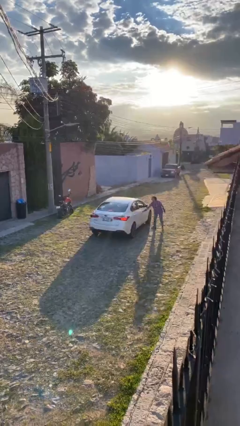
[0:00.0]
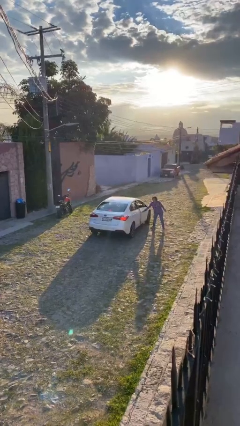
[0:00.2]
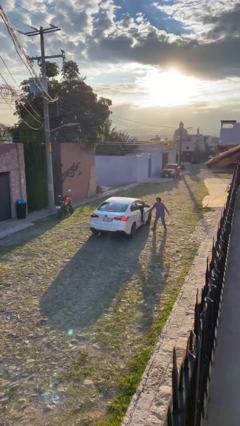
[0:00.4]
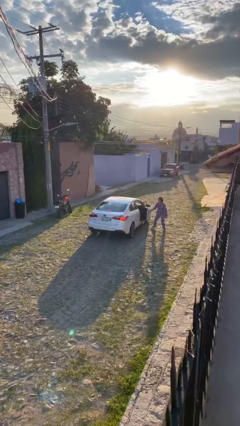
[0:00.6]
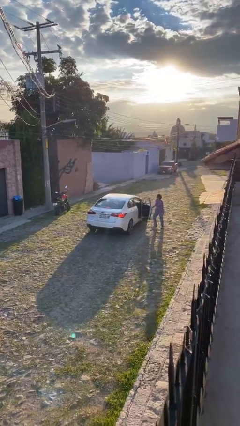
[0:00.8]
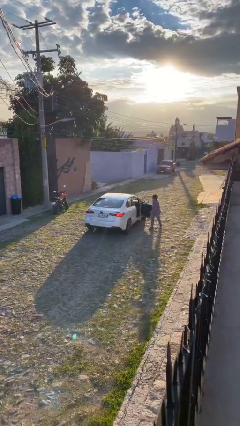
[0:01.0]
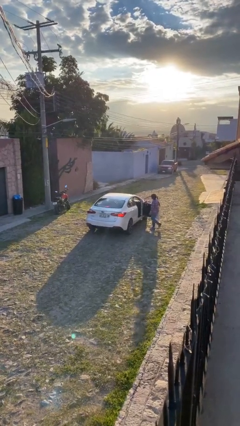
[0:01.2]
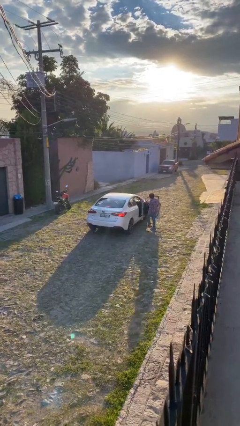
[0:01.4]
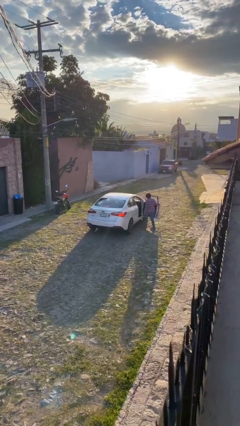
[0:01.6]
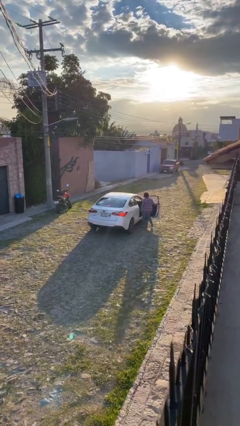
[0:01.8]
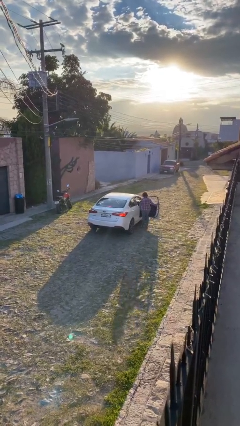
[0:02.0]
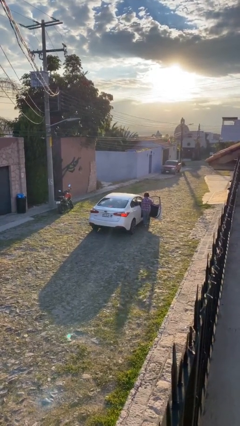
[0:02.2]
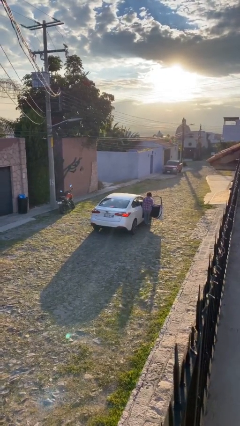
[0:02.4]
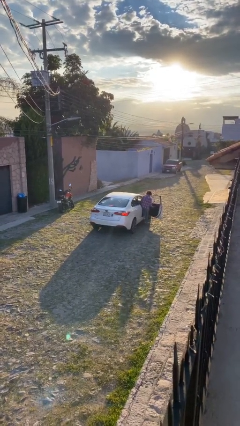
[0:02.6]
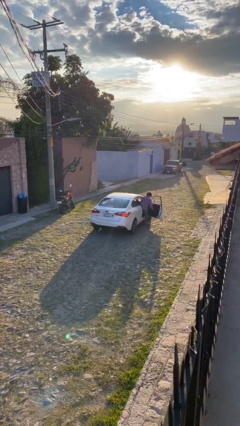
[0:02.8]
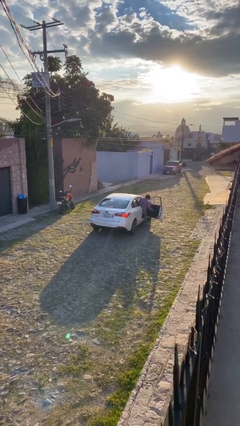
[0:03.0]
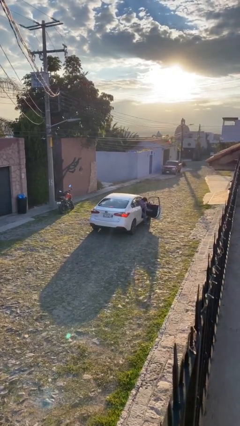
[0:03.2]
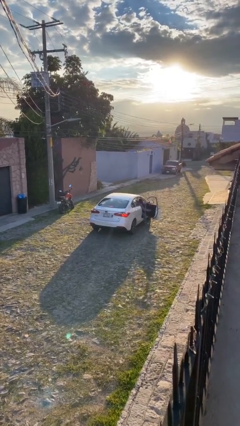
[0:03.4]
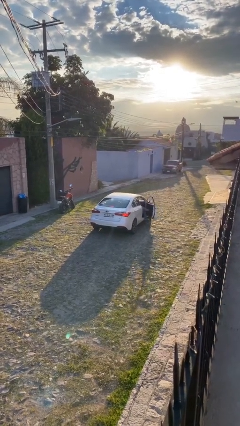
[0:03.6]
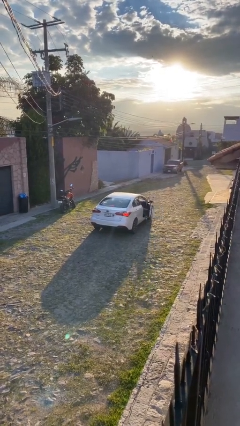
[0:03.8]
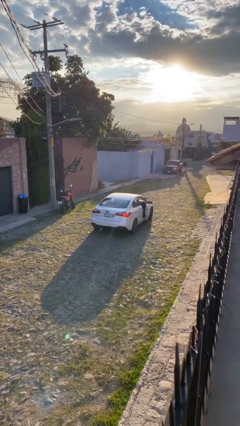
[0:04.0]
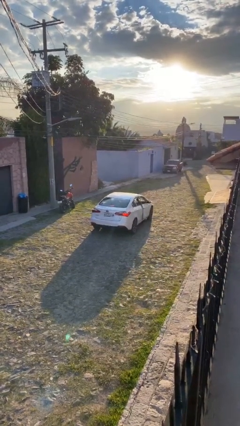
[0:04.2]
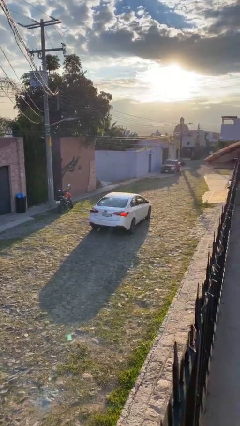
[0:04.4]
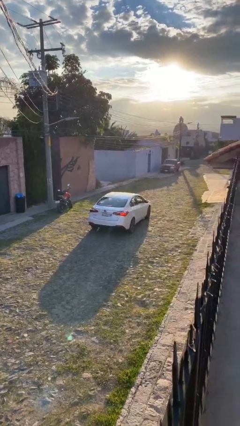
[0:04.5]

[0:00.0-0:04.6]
car picks up person

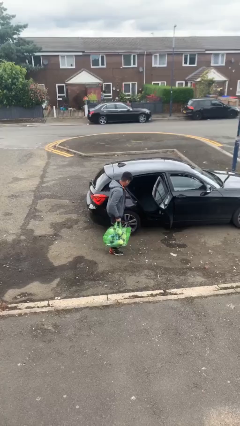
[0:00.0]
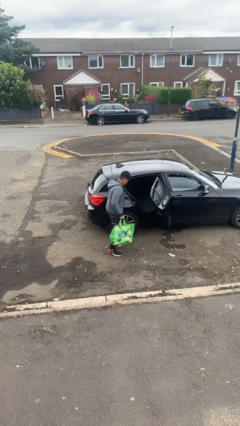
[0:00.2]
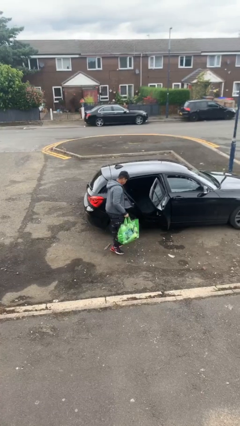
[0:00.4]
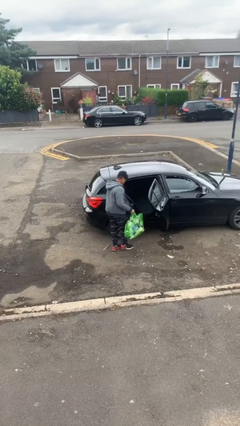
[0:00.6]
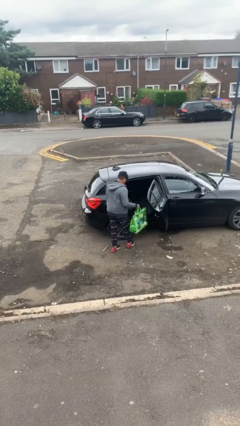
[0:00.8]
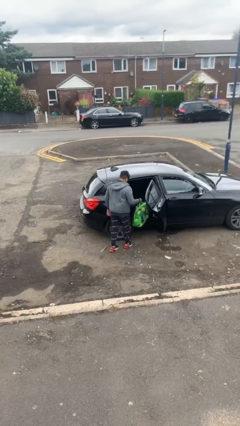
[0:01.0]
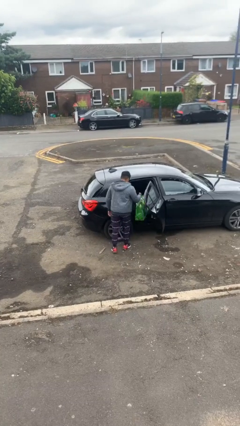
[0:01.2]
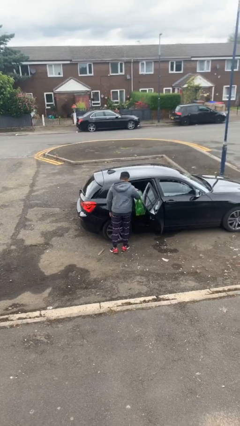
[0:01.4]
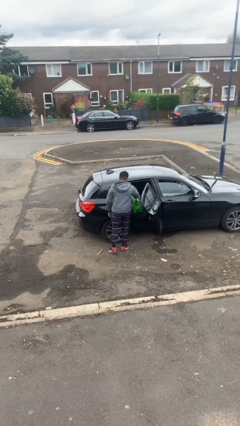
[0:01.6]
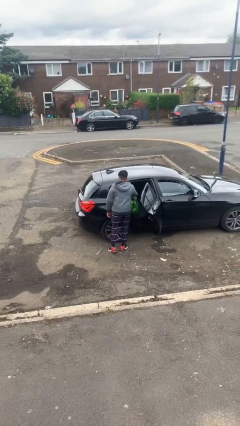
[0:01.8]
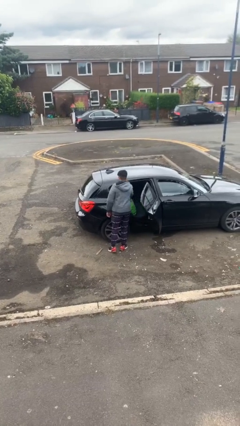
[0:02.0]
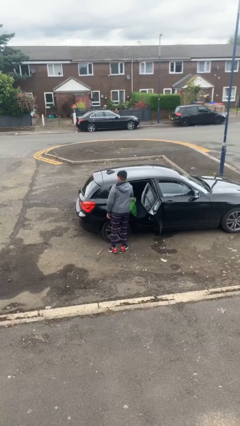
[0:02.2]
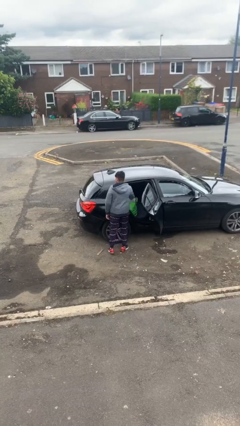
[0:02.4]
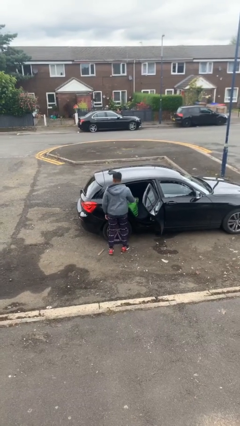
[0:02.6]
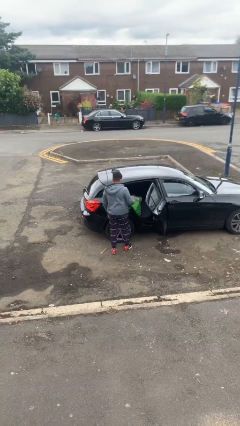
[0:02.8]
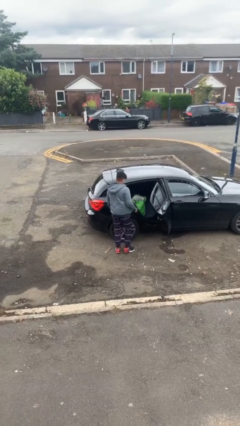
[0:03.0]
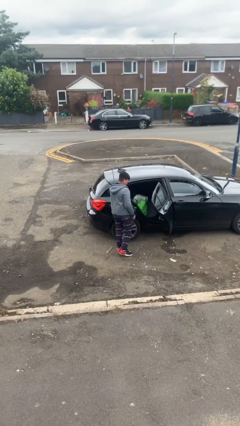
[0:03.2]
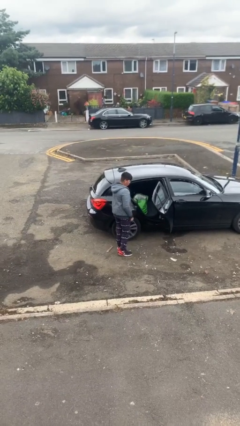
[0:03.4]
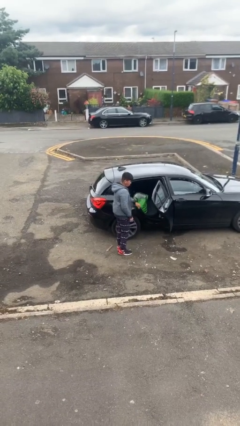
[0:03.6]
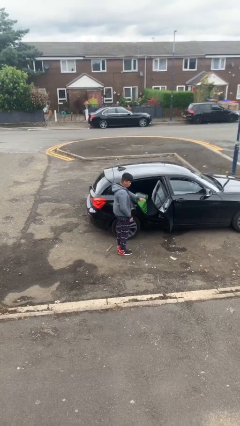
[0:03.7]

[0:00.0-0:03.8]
person loads car

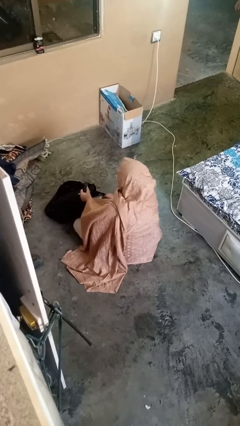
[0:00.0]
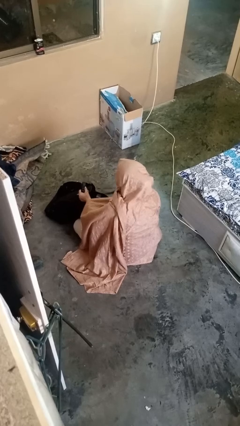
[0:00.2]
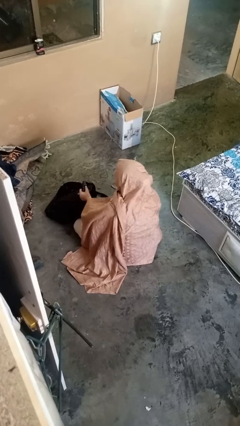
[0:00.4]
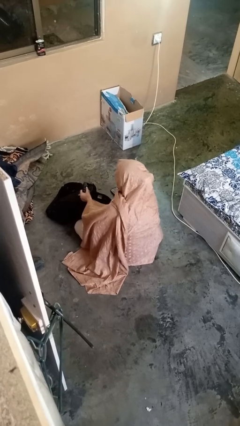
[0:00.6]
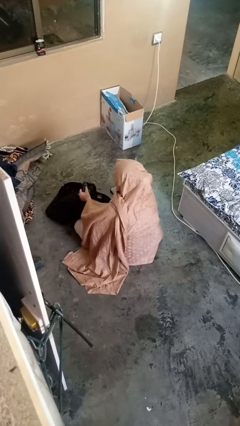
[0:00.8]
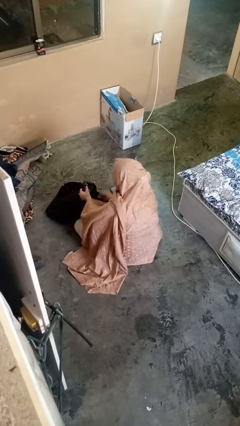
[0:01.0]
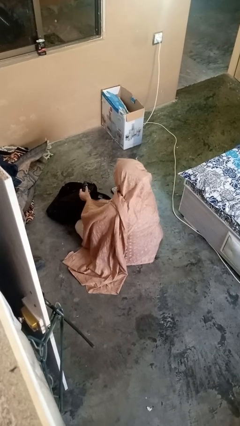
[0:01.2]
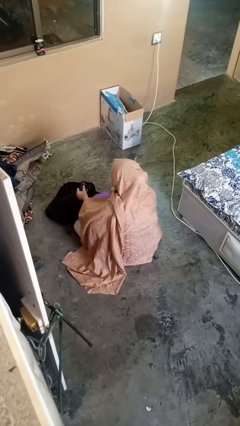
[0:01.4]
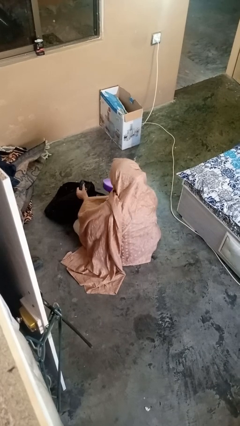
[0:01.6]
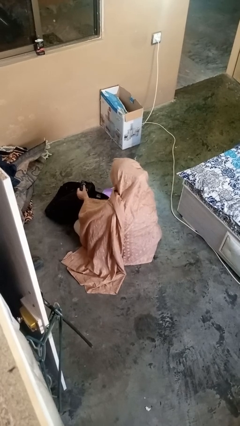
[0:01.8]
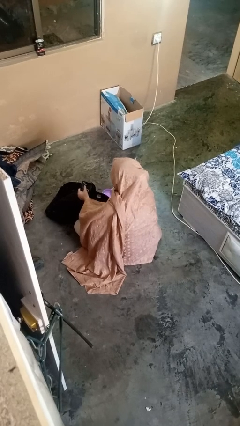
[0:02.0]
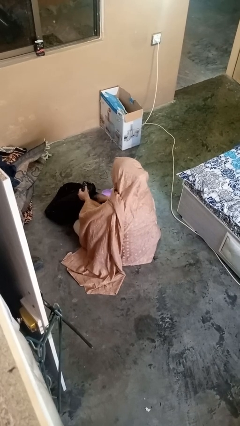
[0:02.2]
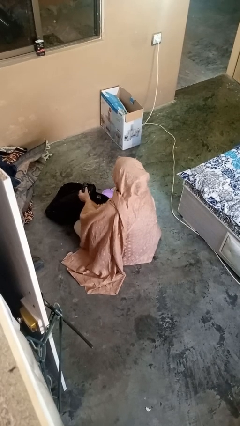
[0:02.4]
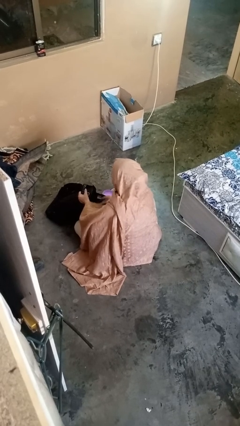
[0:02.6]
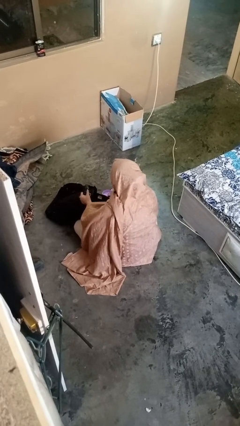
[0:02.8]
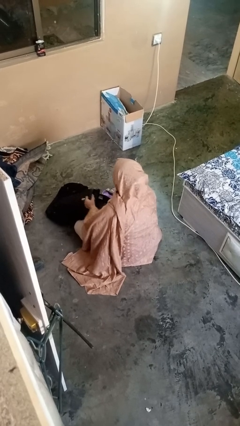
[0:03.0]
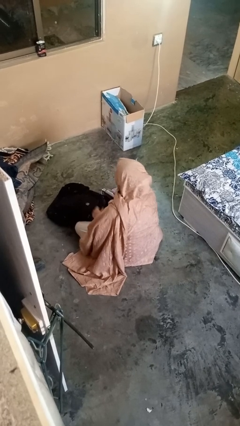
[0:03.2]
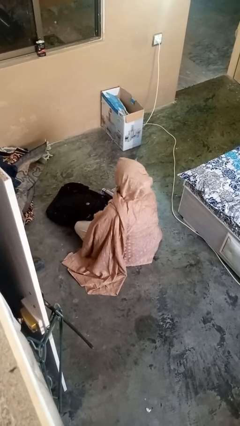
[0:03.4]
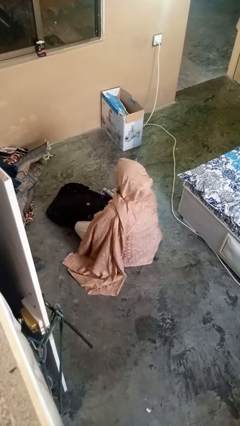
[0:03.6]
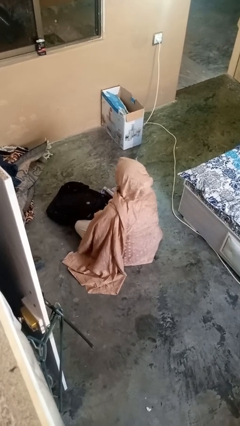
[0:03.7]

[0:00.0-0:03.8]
person takes object from backpack

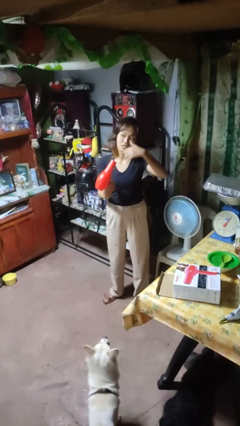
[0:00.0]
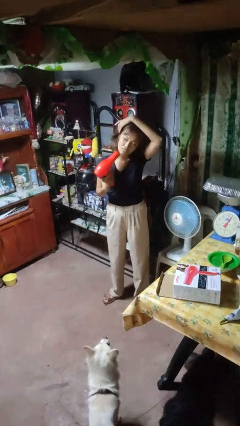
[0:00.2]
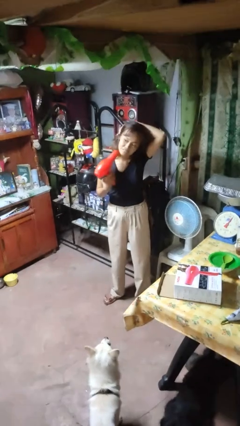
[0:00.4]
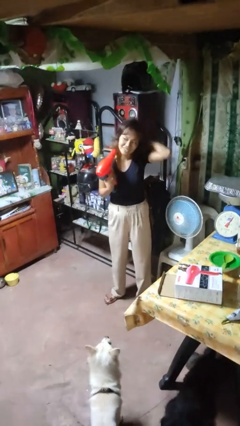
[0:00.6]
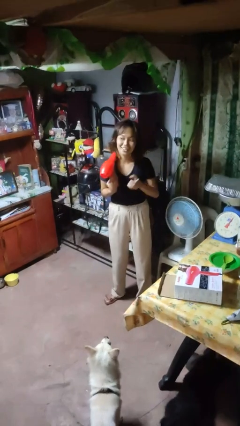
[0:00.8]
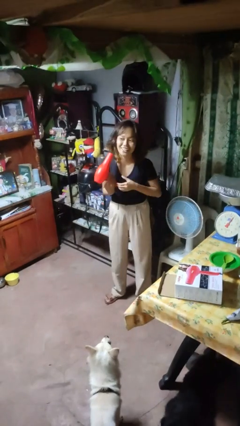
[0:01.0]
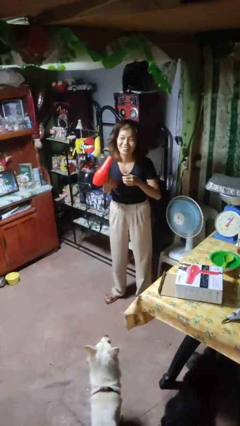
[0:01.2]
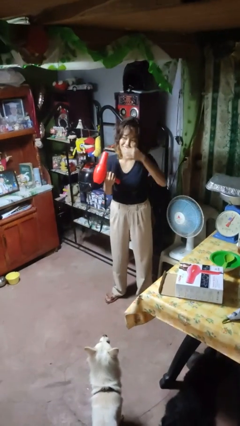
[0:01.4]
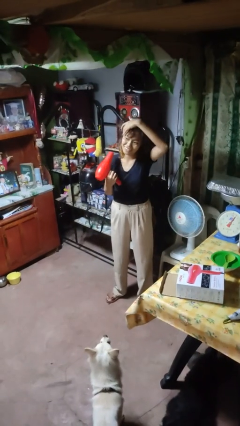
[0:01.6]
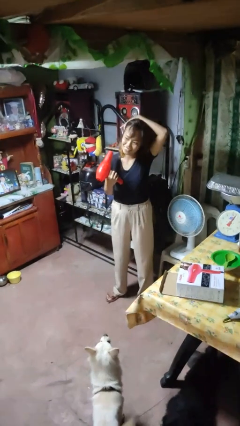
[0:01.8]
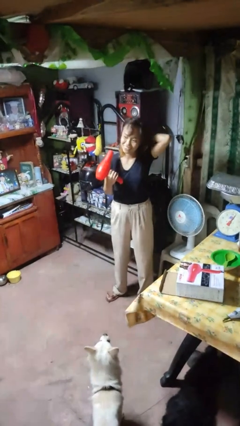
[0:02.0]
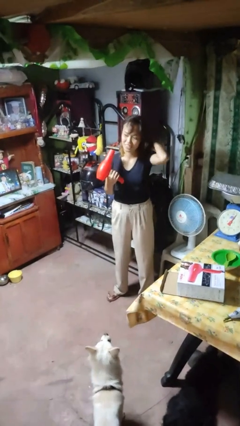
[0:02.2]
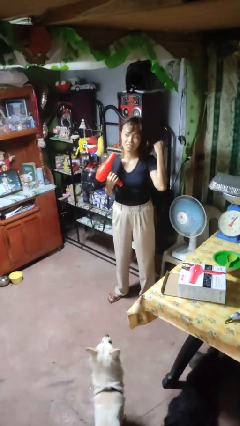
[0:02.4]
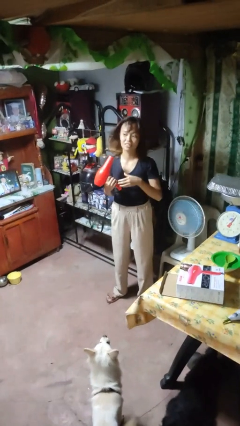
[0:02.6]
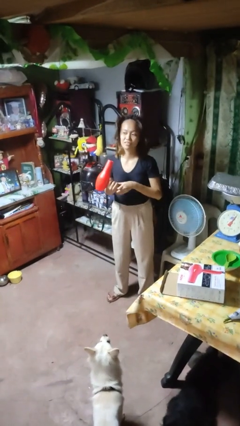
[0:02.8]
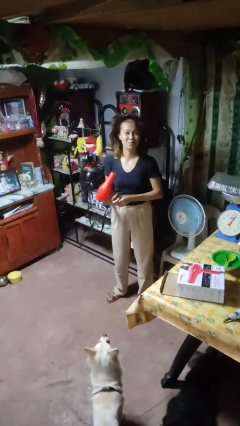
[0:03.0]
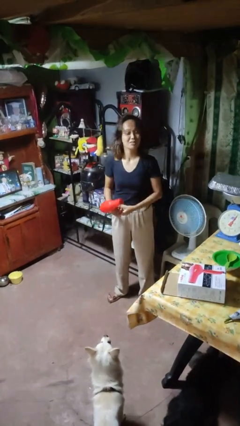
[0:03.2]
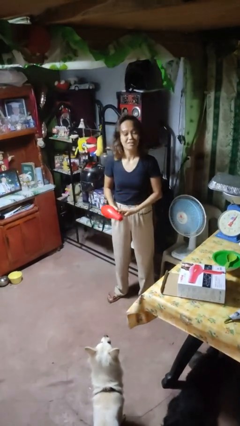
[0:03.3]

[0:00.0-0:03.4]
person dries hair with hairdryer

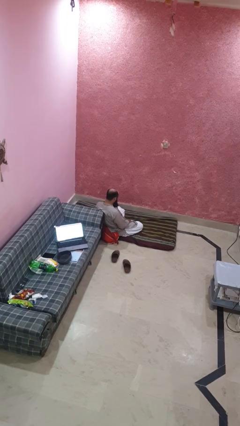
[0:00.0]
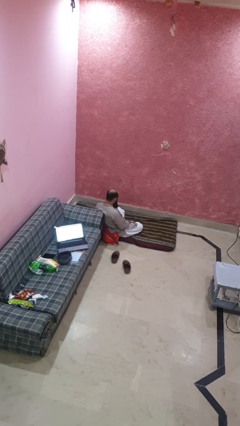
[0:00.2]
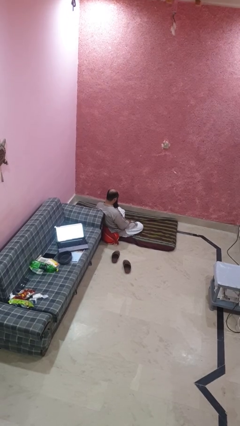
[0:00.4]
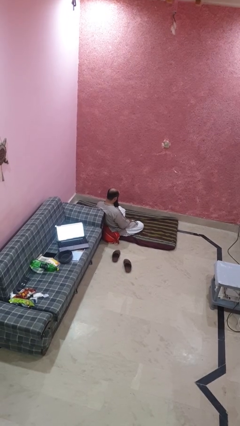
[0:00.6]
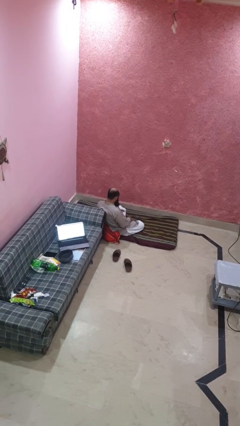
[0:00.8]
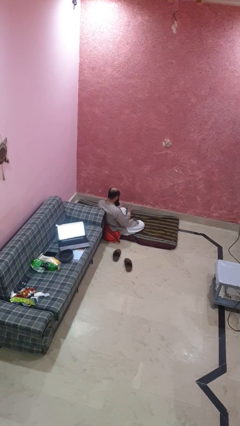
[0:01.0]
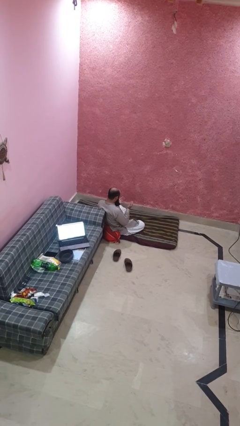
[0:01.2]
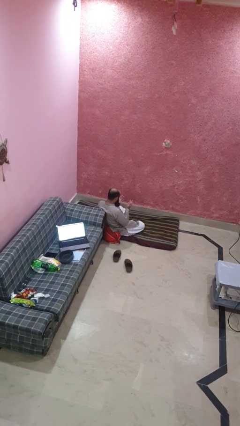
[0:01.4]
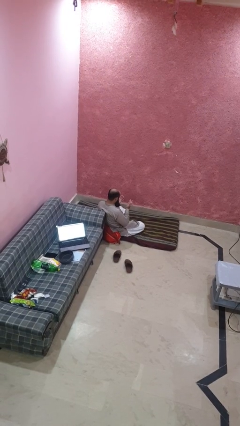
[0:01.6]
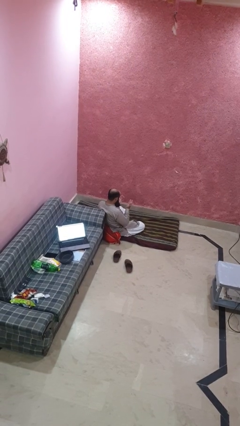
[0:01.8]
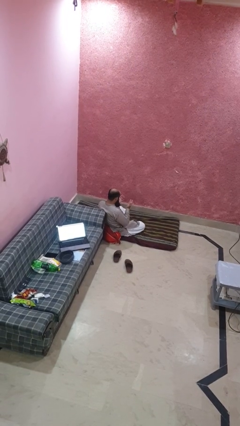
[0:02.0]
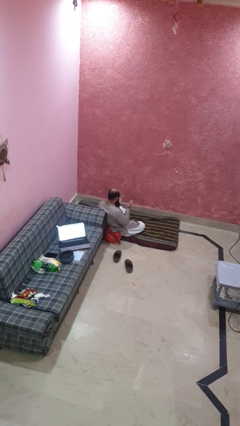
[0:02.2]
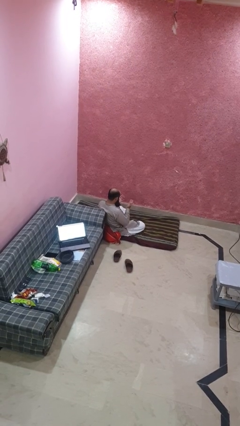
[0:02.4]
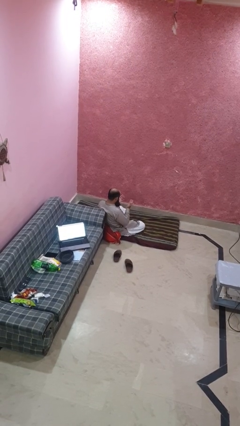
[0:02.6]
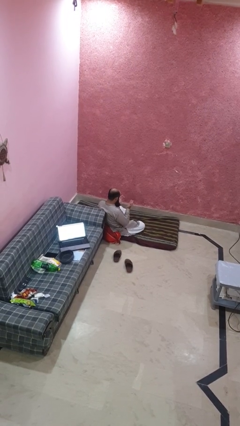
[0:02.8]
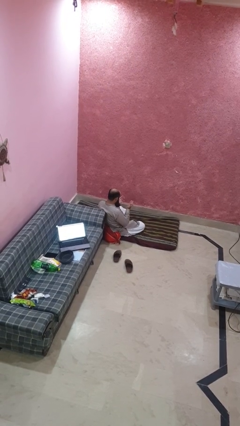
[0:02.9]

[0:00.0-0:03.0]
person looks at hands in lap
